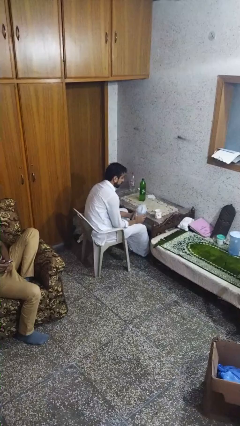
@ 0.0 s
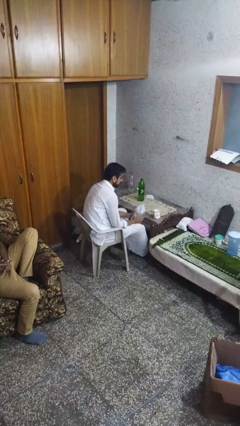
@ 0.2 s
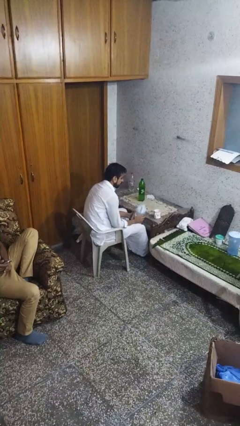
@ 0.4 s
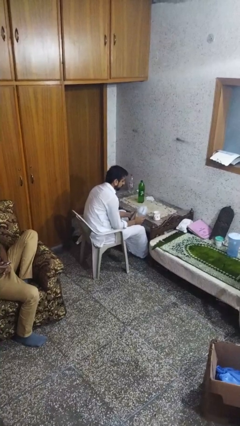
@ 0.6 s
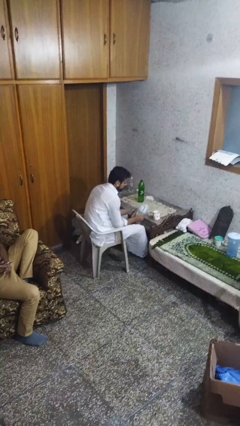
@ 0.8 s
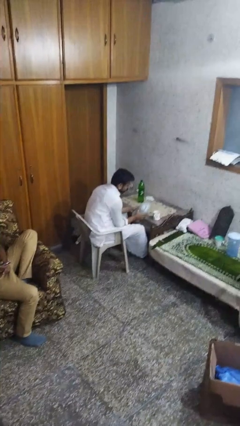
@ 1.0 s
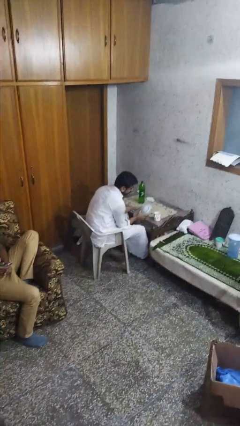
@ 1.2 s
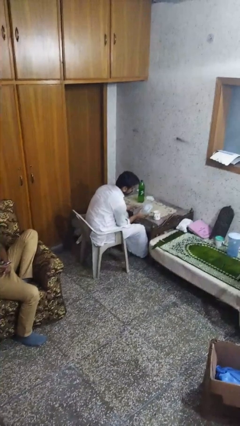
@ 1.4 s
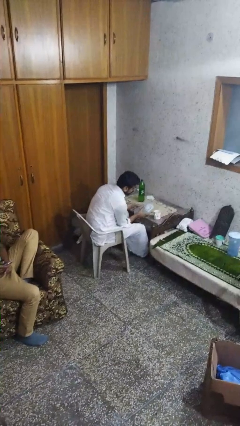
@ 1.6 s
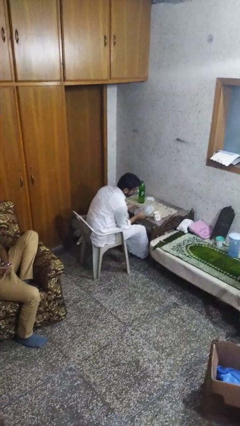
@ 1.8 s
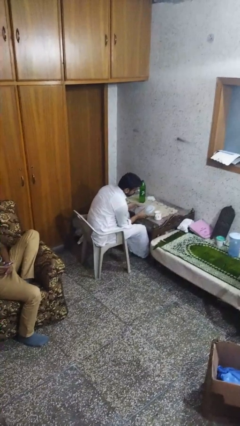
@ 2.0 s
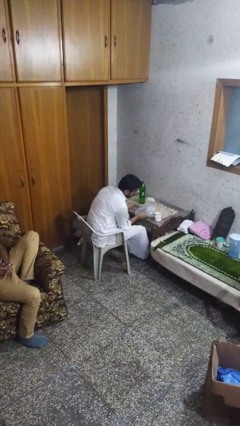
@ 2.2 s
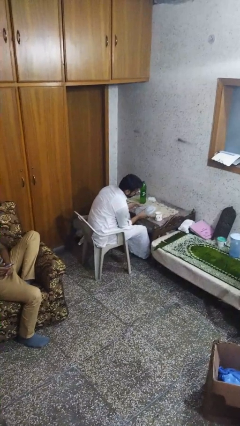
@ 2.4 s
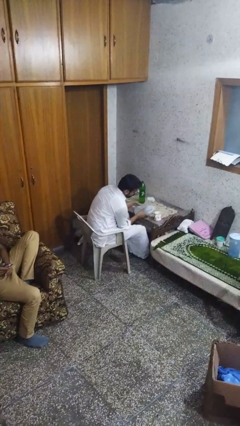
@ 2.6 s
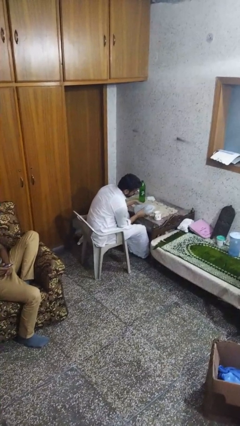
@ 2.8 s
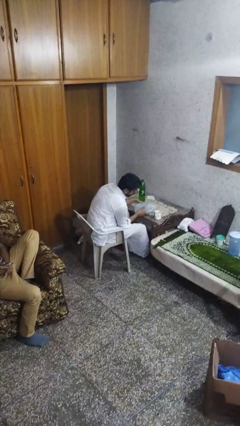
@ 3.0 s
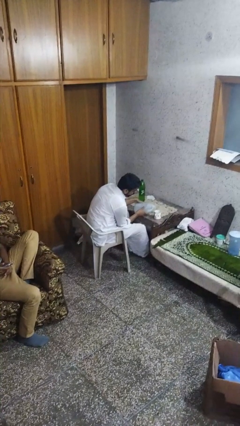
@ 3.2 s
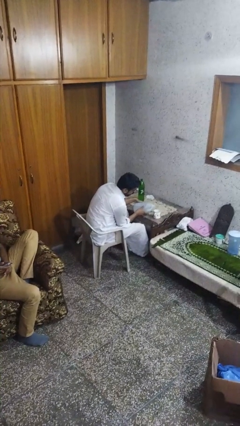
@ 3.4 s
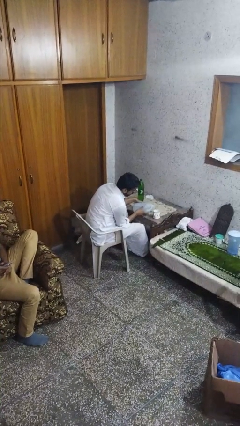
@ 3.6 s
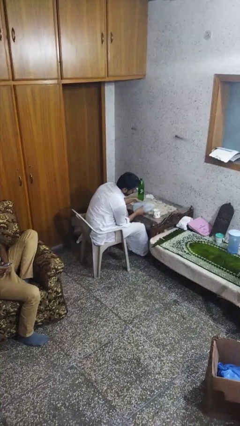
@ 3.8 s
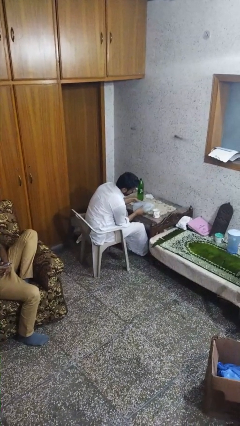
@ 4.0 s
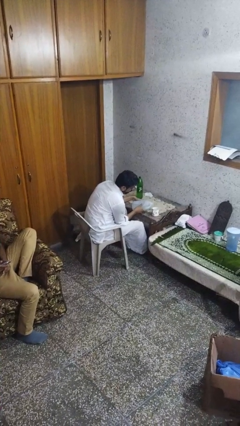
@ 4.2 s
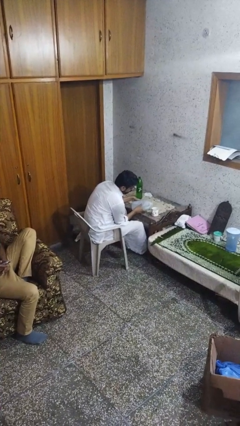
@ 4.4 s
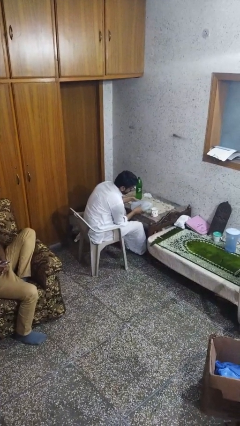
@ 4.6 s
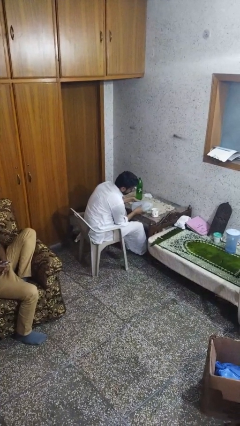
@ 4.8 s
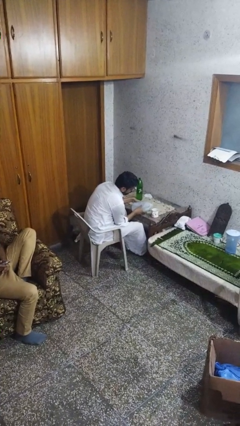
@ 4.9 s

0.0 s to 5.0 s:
person pours liquid into cup

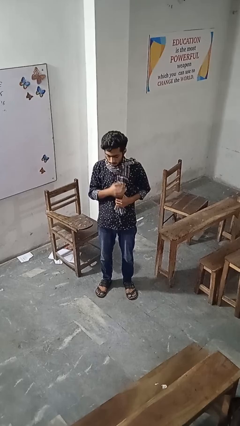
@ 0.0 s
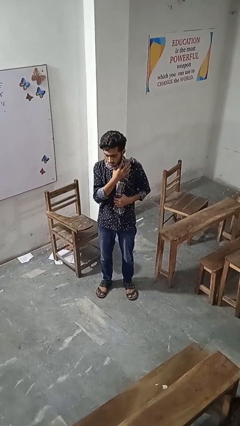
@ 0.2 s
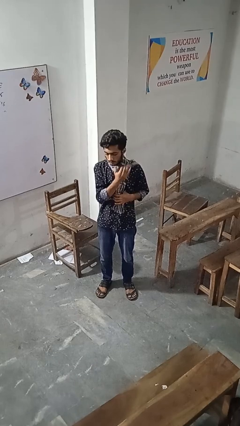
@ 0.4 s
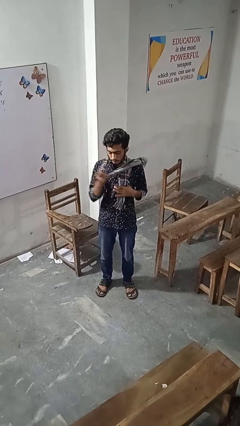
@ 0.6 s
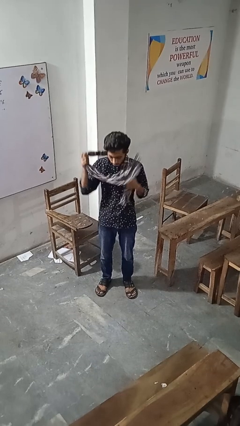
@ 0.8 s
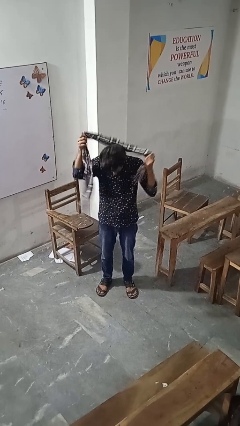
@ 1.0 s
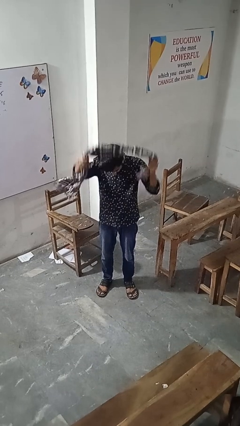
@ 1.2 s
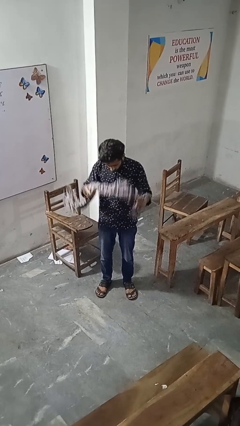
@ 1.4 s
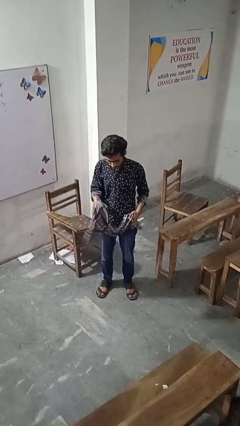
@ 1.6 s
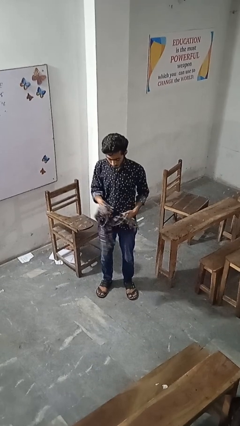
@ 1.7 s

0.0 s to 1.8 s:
person takes off scarf

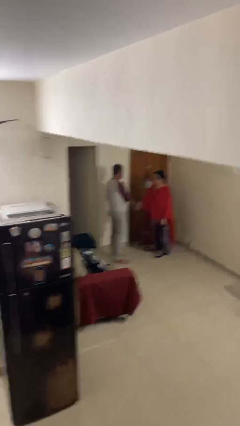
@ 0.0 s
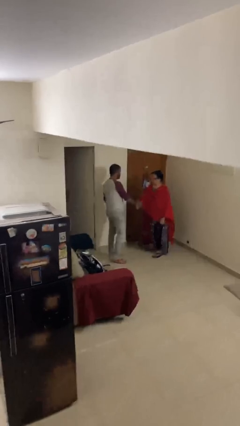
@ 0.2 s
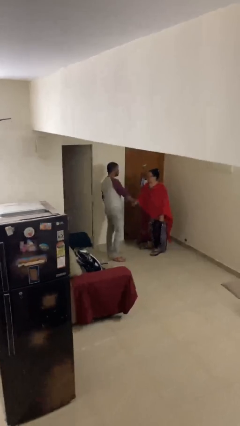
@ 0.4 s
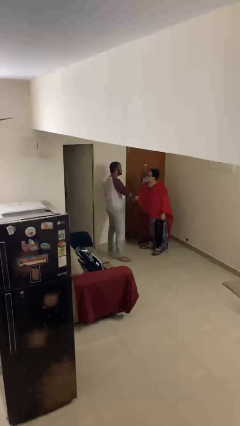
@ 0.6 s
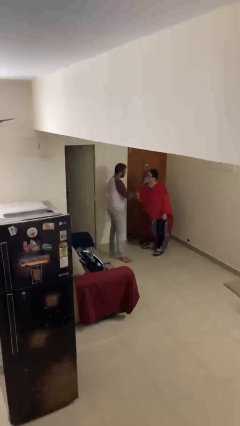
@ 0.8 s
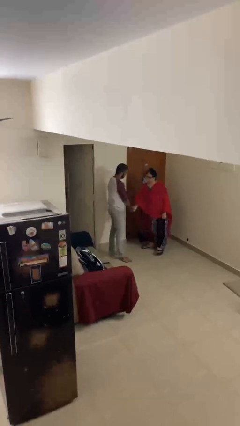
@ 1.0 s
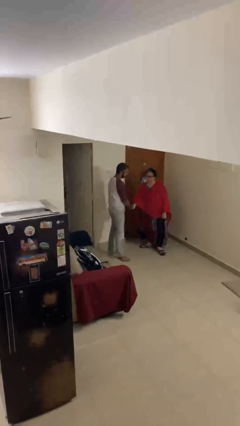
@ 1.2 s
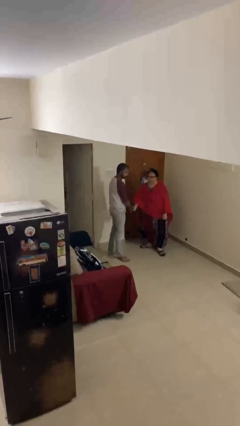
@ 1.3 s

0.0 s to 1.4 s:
person shakes hand

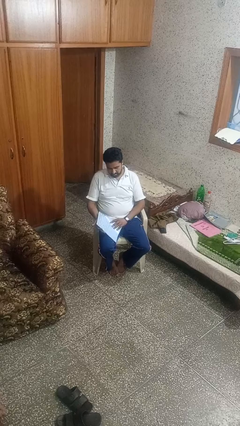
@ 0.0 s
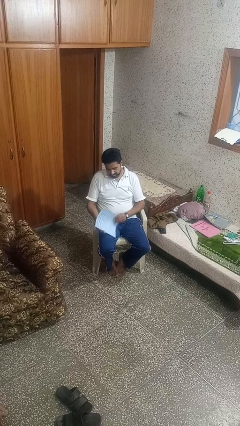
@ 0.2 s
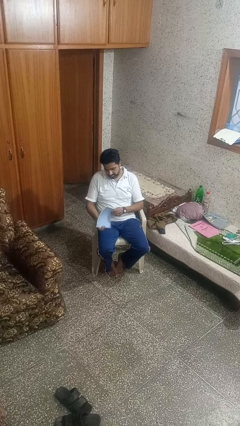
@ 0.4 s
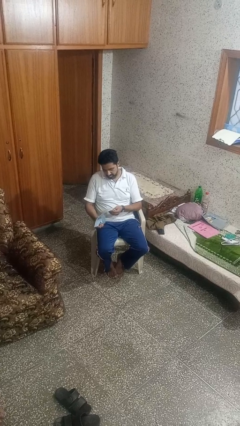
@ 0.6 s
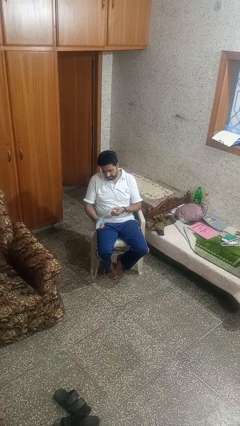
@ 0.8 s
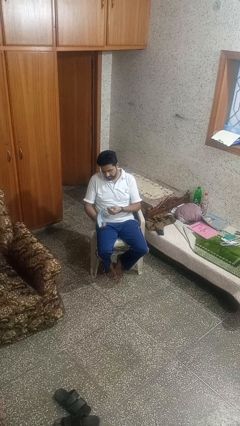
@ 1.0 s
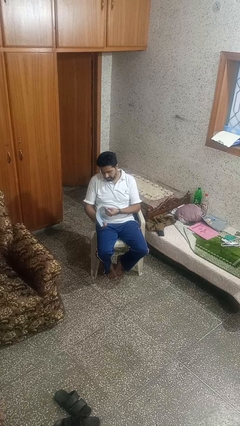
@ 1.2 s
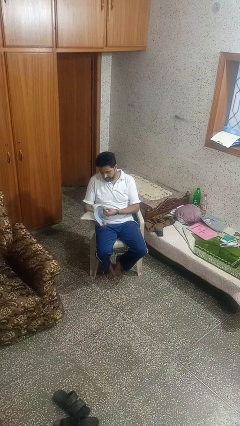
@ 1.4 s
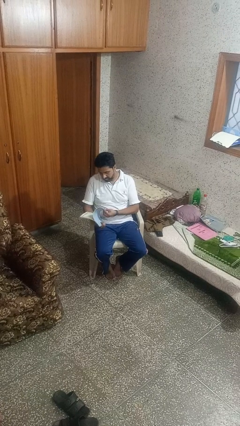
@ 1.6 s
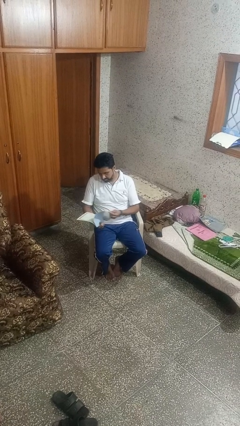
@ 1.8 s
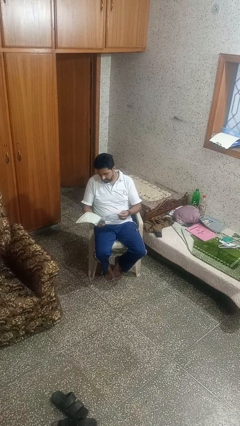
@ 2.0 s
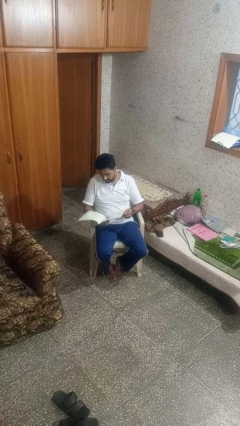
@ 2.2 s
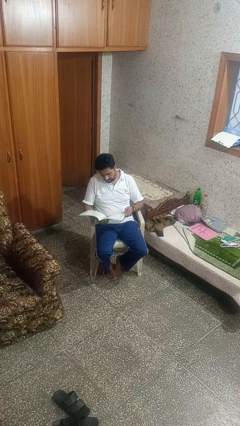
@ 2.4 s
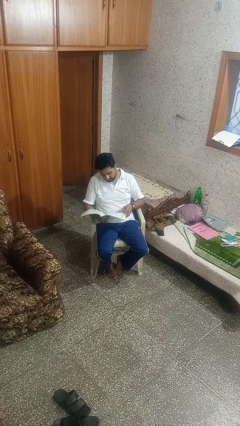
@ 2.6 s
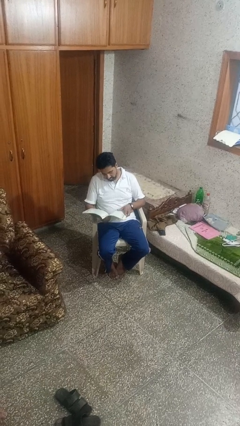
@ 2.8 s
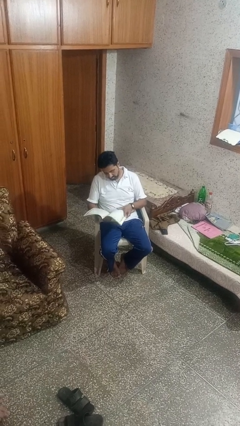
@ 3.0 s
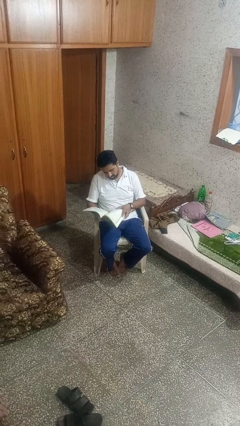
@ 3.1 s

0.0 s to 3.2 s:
person reads magazine

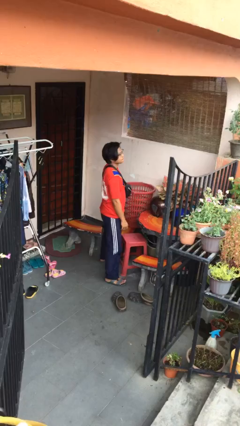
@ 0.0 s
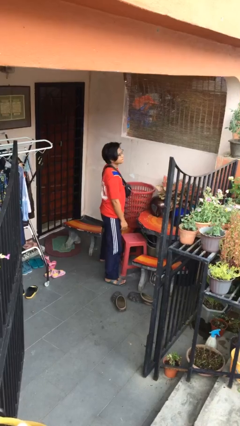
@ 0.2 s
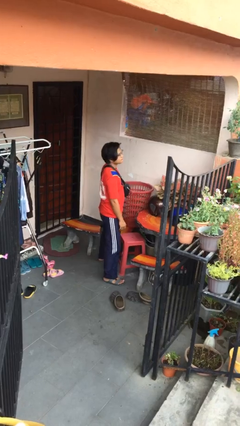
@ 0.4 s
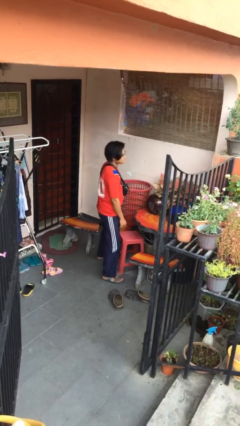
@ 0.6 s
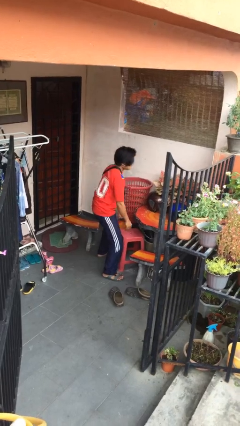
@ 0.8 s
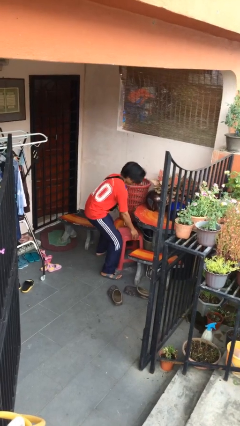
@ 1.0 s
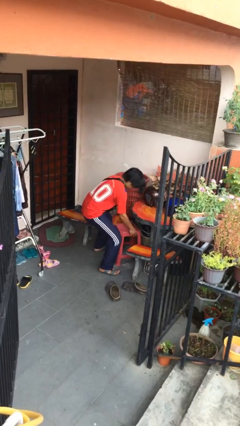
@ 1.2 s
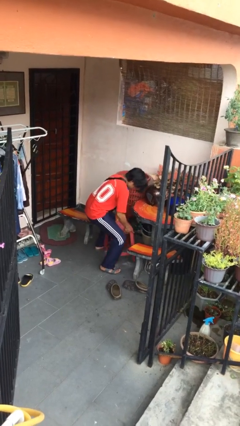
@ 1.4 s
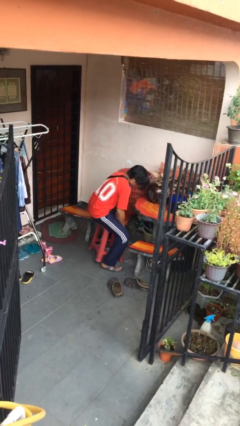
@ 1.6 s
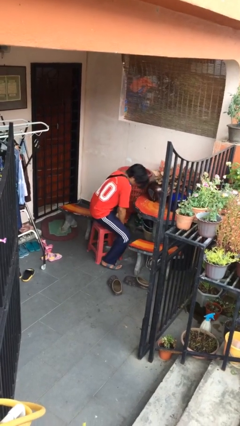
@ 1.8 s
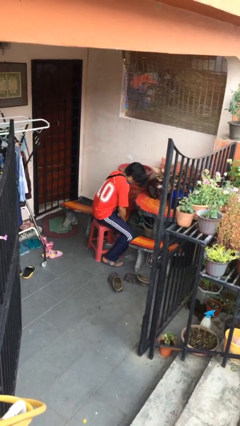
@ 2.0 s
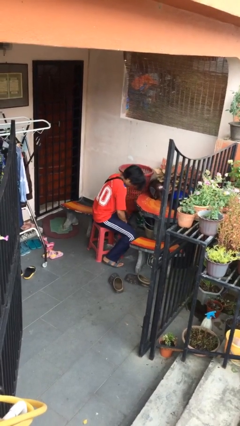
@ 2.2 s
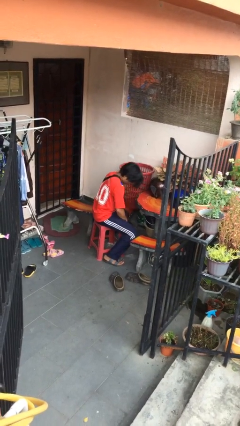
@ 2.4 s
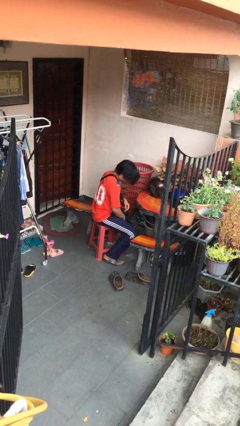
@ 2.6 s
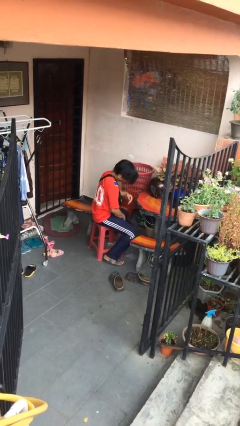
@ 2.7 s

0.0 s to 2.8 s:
person sits down

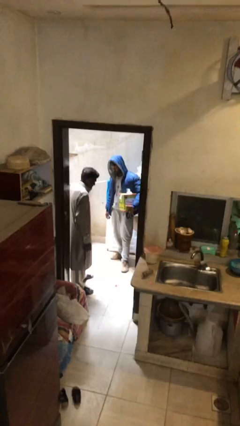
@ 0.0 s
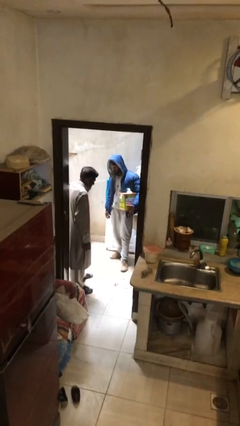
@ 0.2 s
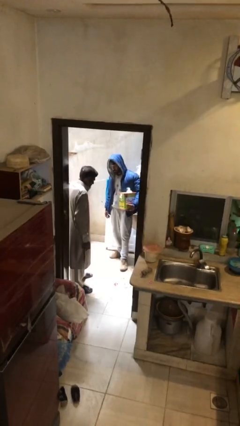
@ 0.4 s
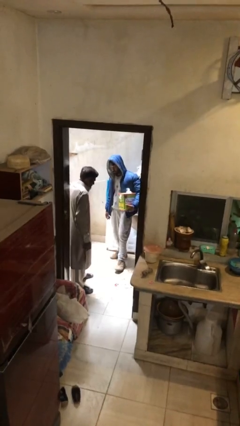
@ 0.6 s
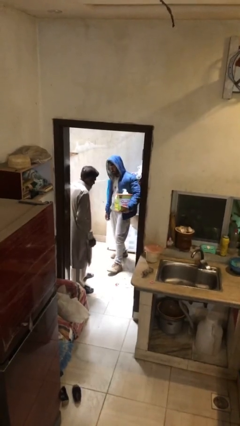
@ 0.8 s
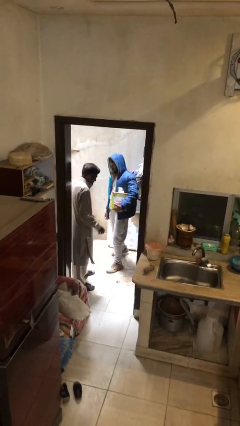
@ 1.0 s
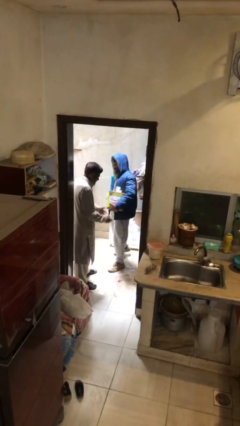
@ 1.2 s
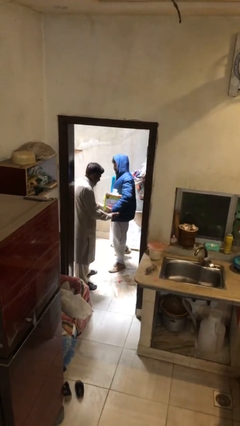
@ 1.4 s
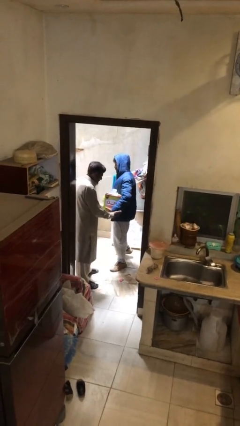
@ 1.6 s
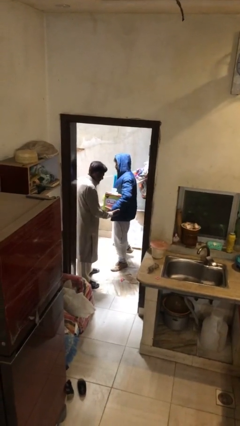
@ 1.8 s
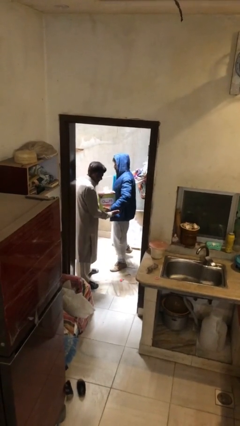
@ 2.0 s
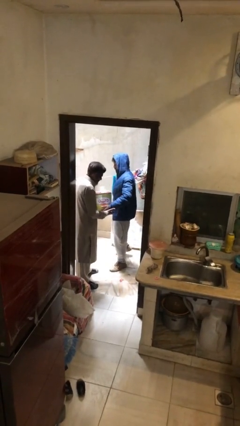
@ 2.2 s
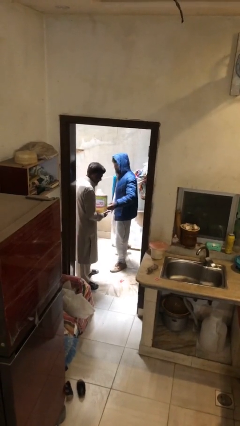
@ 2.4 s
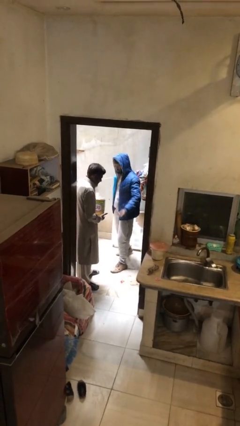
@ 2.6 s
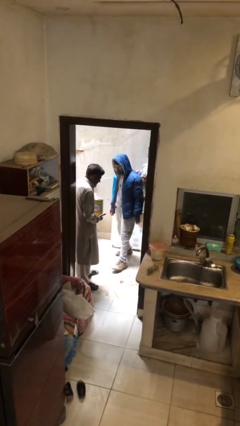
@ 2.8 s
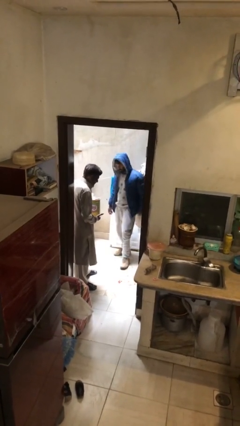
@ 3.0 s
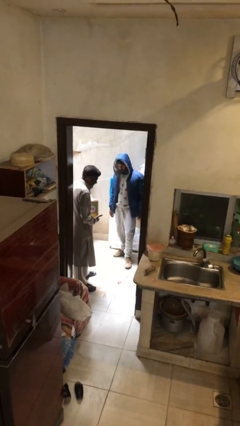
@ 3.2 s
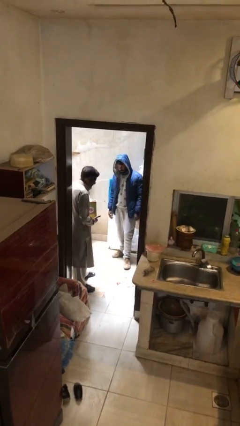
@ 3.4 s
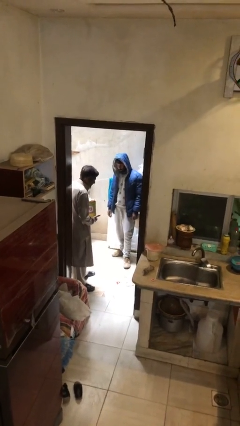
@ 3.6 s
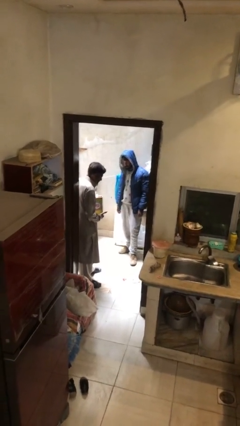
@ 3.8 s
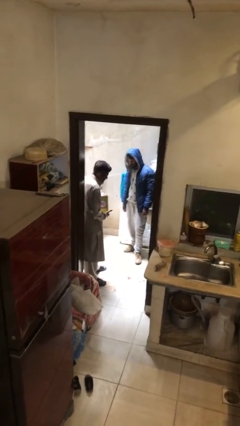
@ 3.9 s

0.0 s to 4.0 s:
person transfers object to person
